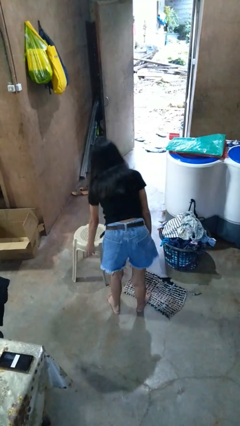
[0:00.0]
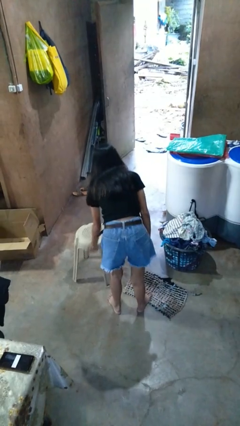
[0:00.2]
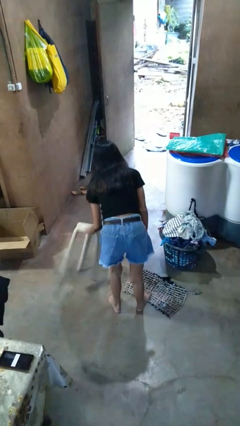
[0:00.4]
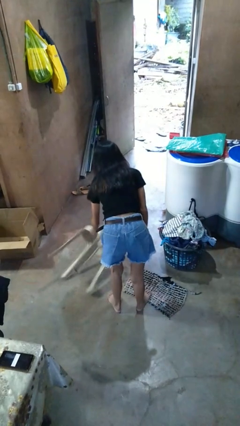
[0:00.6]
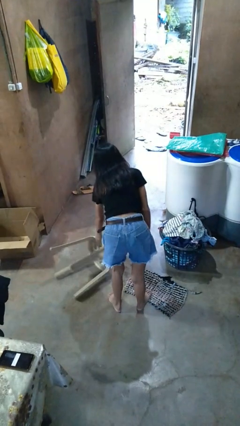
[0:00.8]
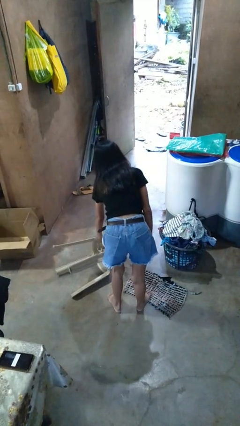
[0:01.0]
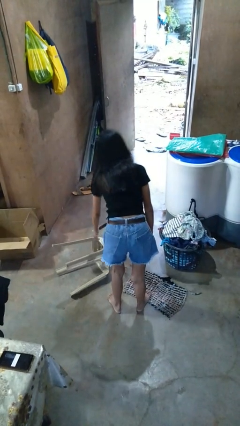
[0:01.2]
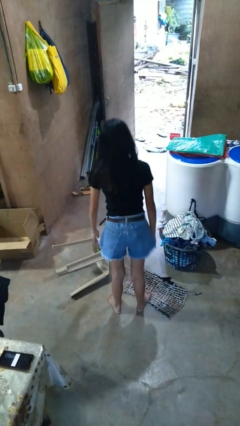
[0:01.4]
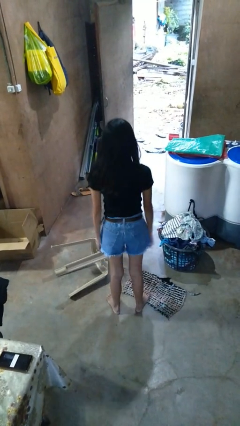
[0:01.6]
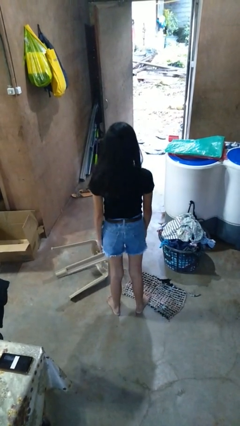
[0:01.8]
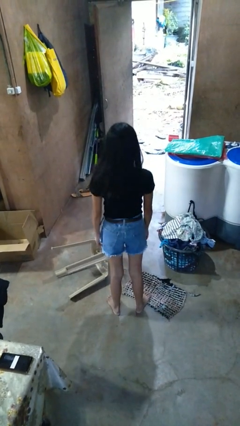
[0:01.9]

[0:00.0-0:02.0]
person knocks over furniture

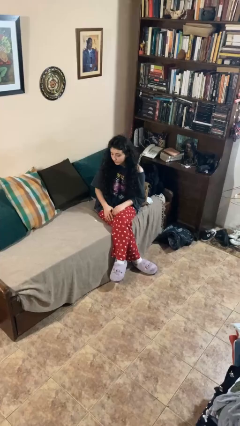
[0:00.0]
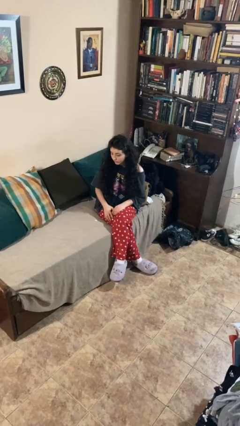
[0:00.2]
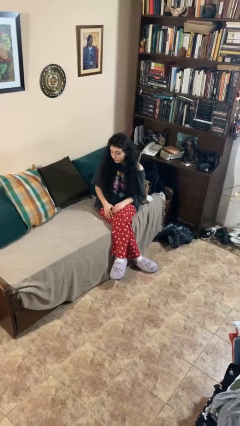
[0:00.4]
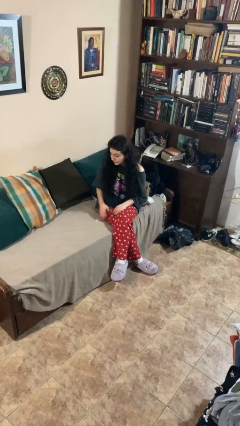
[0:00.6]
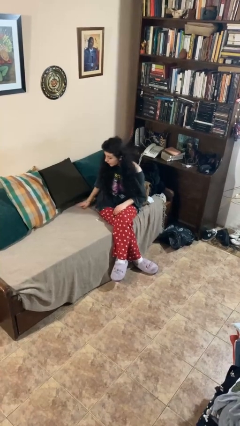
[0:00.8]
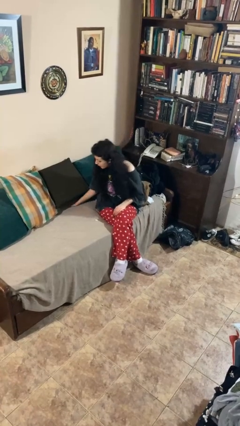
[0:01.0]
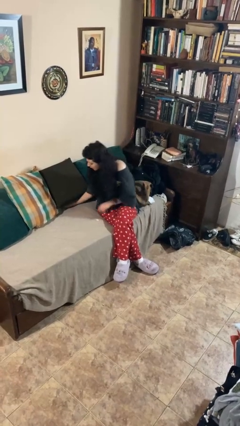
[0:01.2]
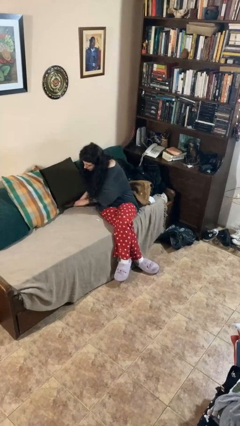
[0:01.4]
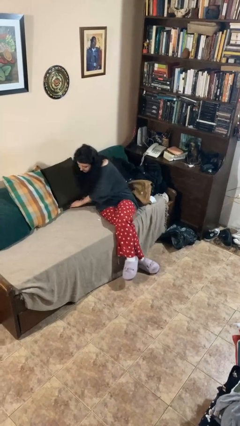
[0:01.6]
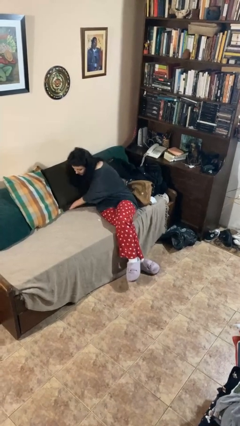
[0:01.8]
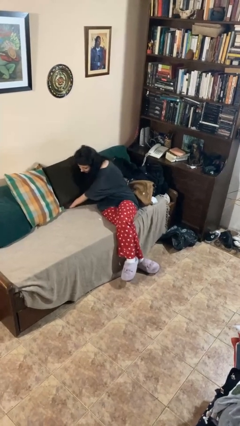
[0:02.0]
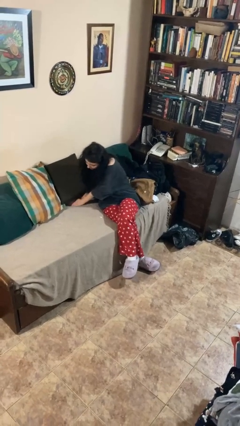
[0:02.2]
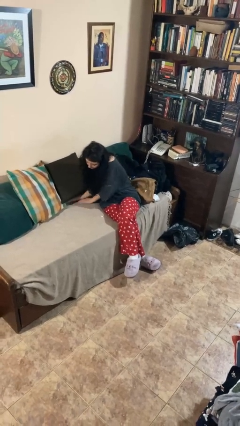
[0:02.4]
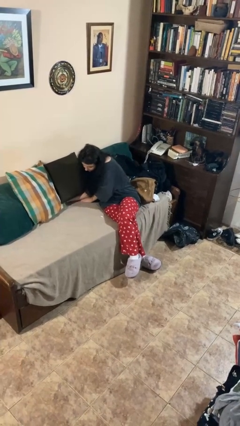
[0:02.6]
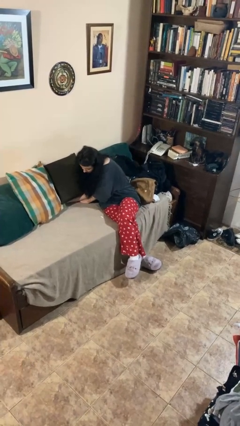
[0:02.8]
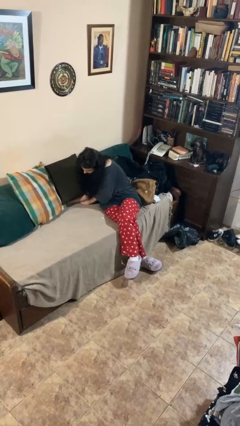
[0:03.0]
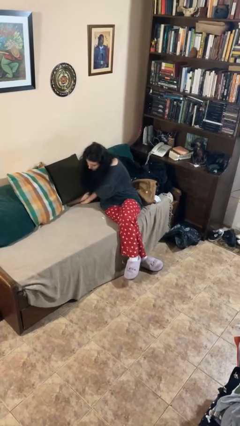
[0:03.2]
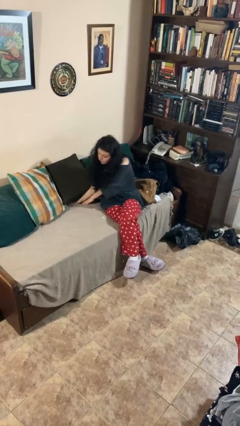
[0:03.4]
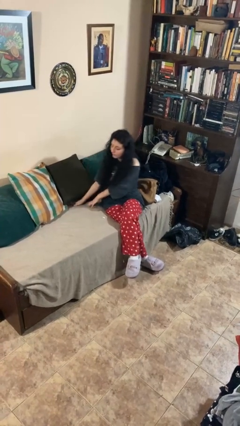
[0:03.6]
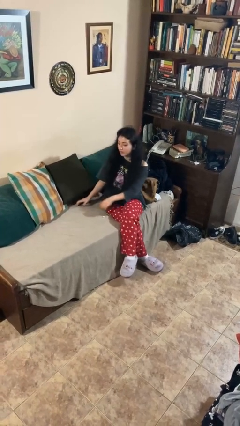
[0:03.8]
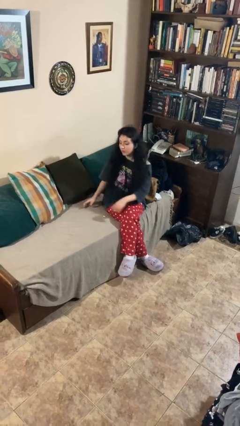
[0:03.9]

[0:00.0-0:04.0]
person searches in couch

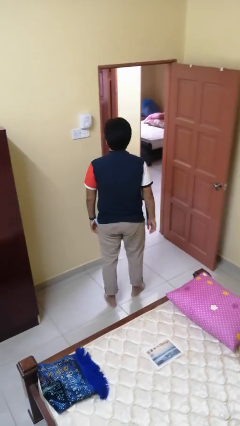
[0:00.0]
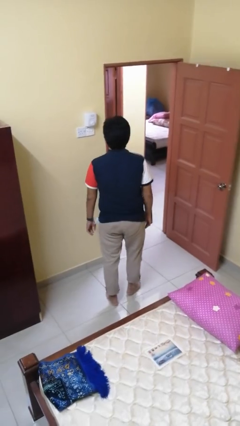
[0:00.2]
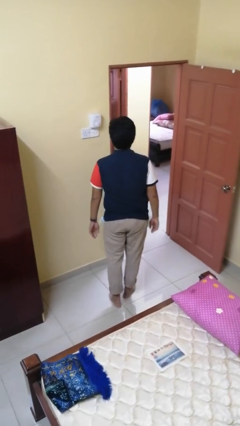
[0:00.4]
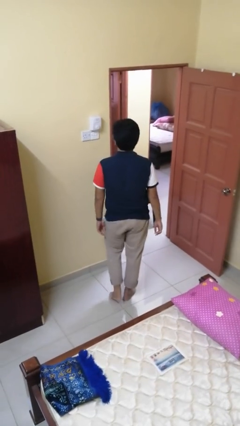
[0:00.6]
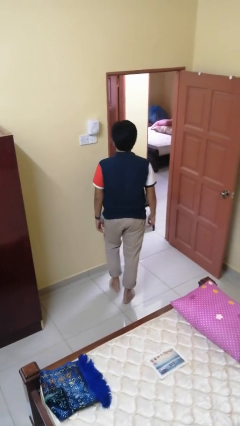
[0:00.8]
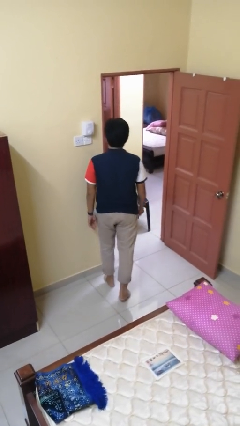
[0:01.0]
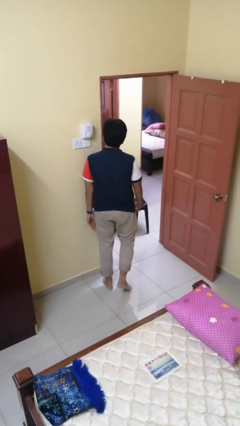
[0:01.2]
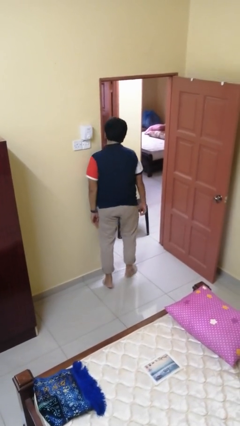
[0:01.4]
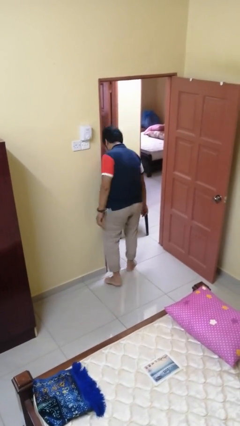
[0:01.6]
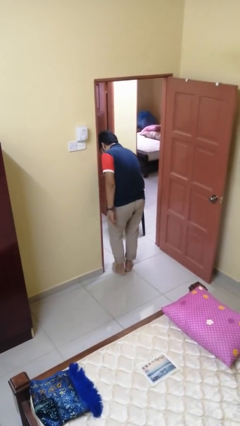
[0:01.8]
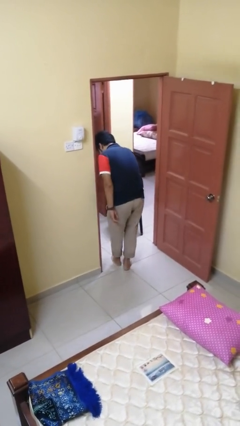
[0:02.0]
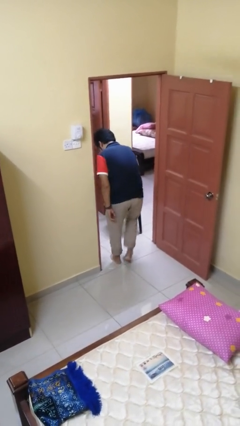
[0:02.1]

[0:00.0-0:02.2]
person bumps into wall

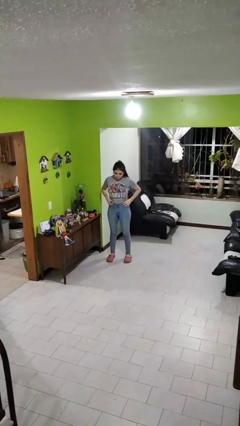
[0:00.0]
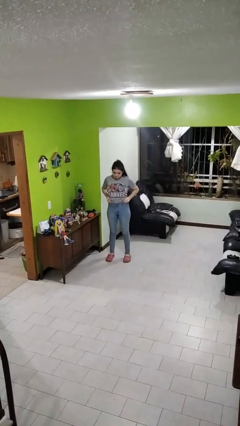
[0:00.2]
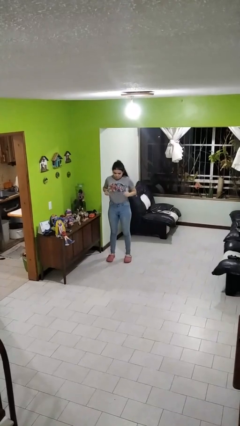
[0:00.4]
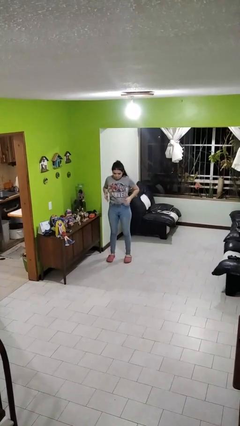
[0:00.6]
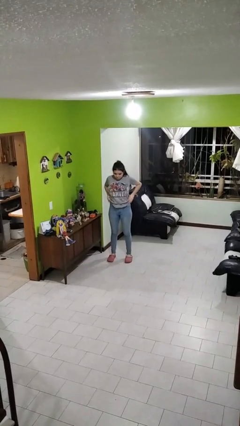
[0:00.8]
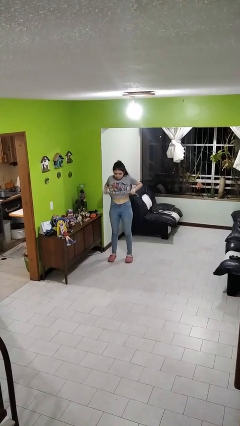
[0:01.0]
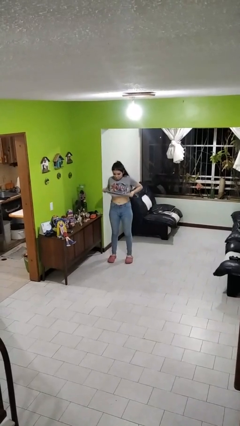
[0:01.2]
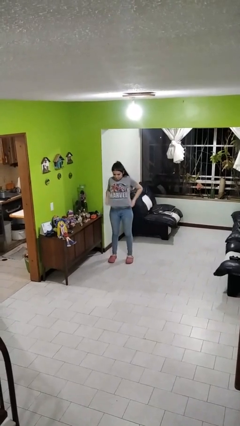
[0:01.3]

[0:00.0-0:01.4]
person untucks shirt

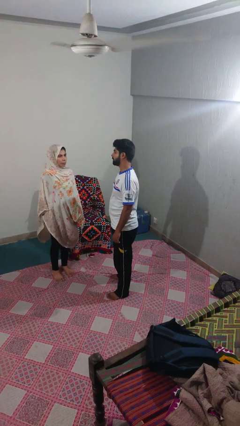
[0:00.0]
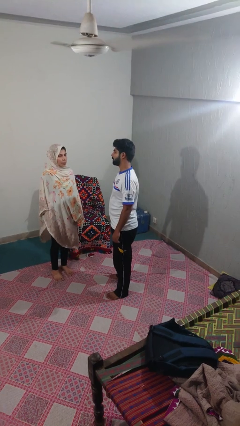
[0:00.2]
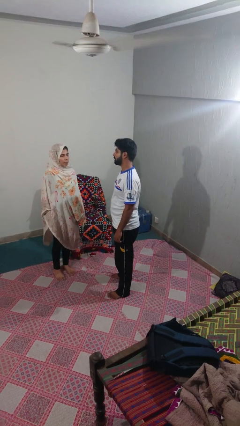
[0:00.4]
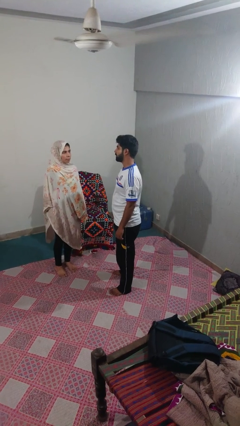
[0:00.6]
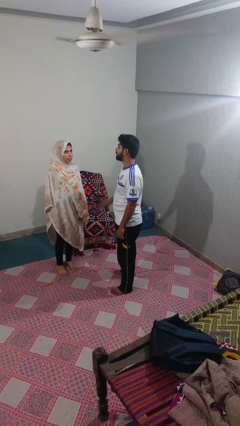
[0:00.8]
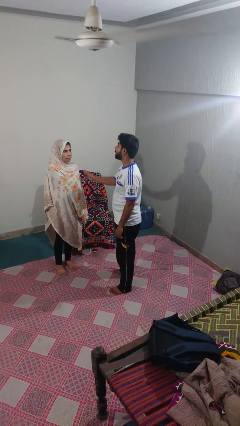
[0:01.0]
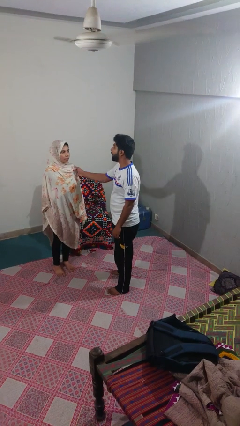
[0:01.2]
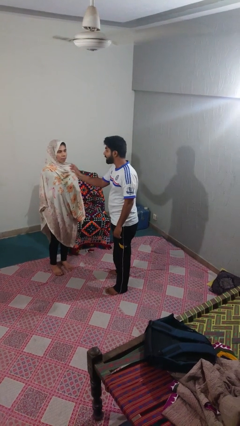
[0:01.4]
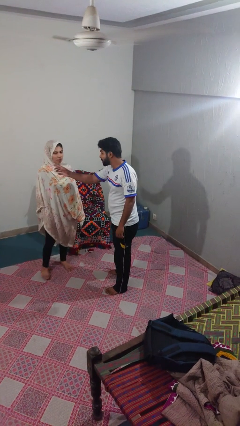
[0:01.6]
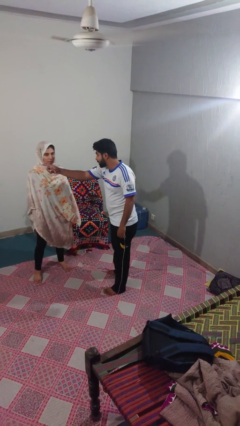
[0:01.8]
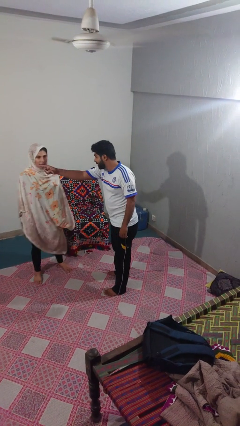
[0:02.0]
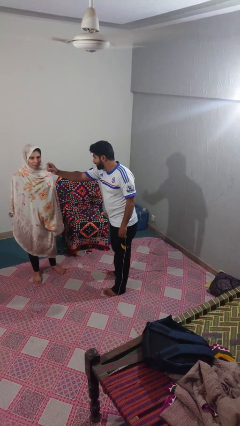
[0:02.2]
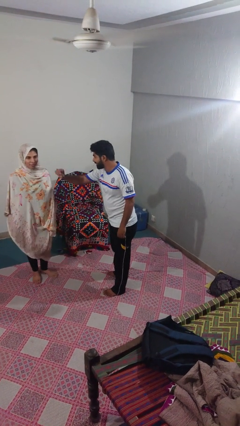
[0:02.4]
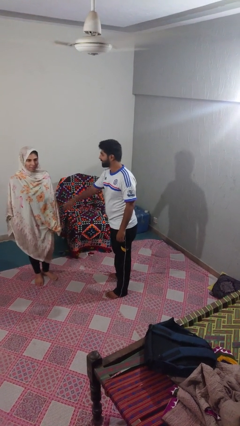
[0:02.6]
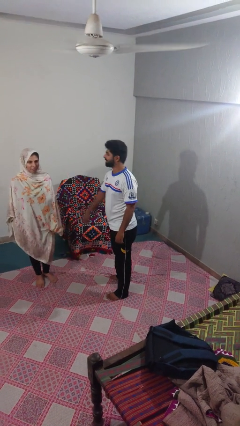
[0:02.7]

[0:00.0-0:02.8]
person shoves person

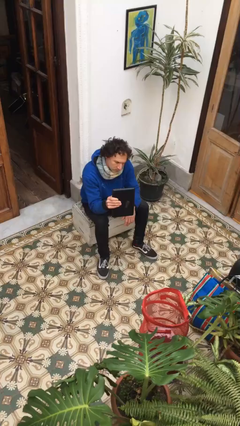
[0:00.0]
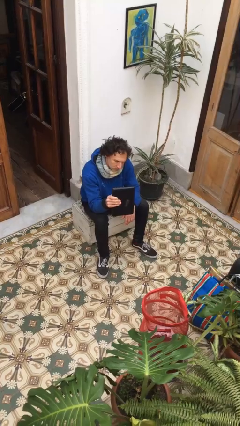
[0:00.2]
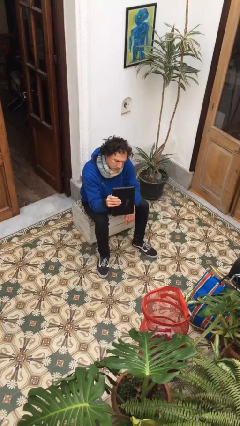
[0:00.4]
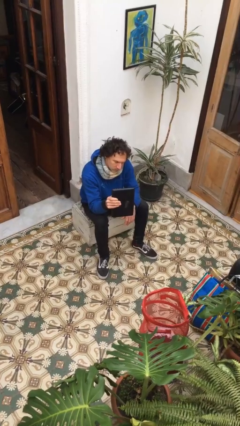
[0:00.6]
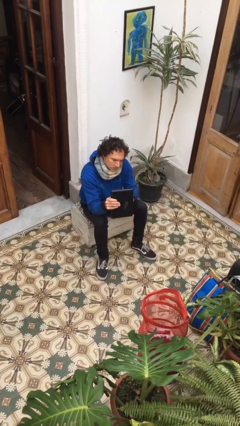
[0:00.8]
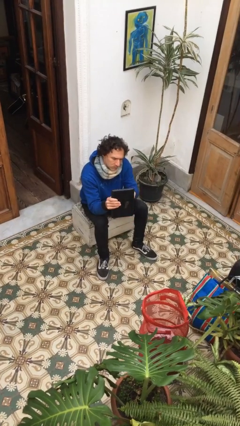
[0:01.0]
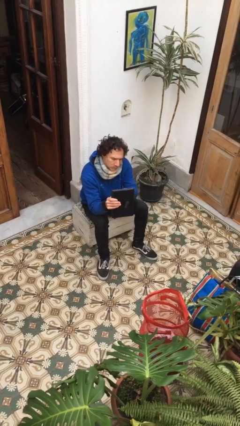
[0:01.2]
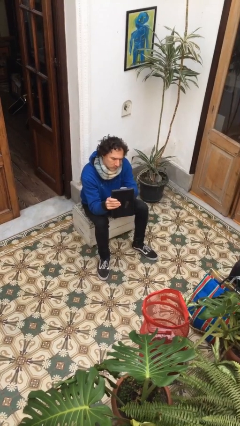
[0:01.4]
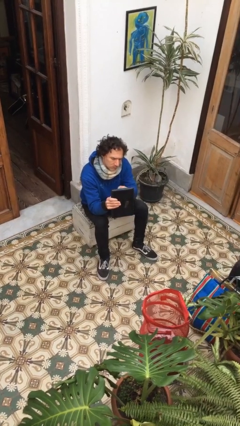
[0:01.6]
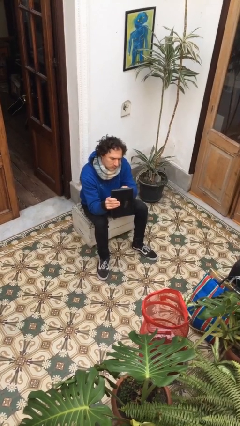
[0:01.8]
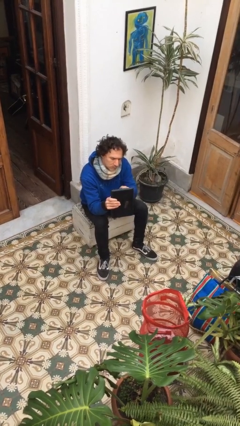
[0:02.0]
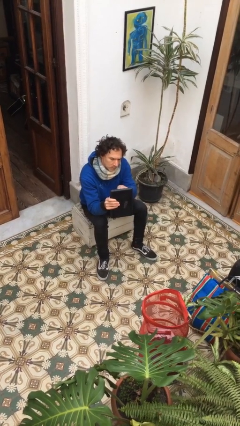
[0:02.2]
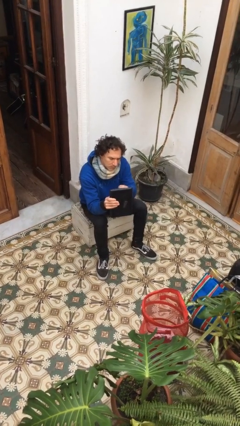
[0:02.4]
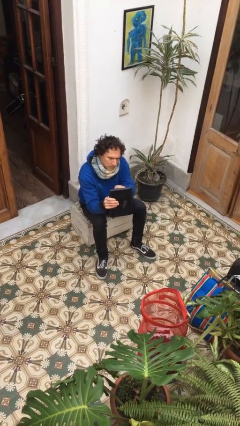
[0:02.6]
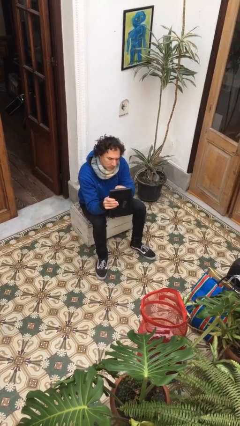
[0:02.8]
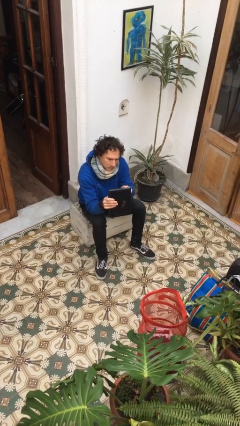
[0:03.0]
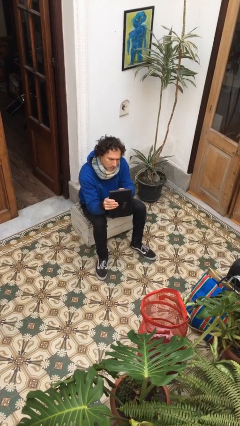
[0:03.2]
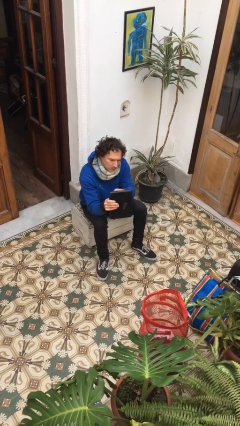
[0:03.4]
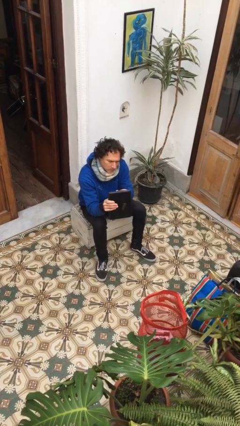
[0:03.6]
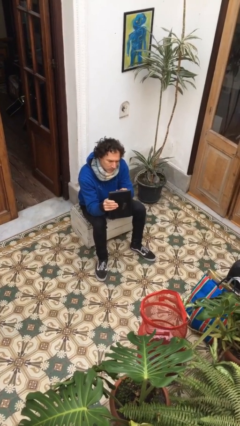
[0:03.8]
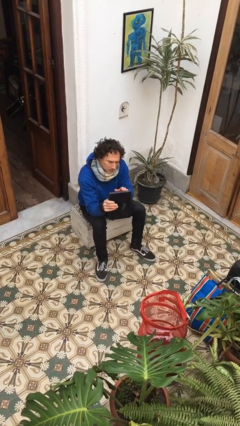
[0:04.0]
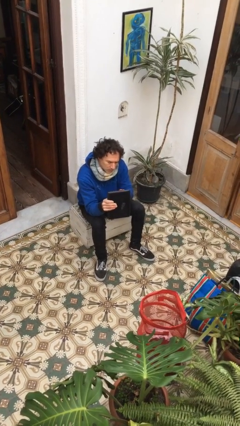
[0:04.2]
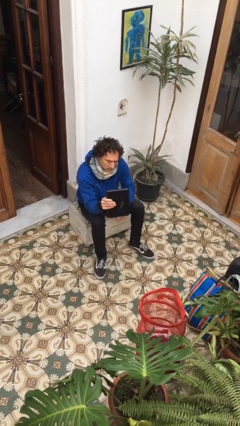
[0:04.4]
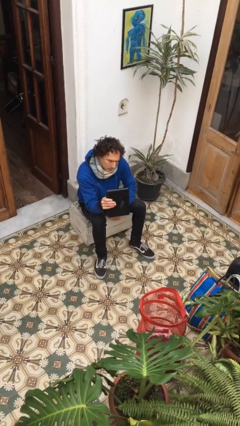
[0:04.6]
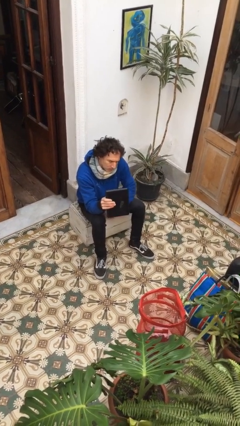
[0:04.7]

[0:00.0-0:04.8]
person interacts with tablet

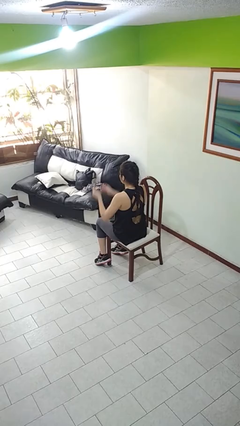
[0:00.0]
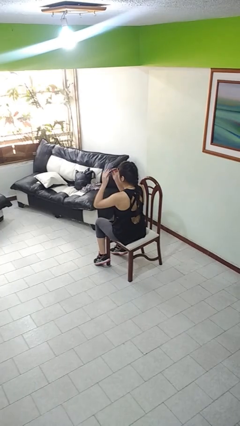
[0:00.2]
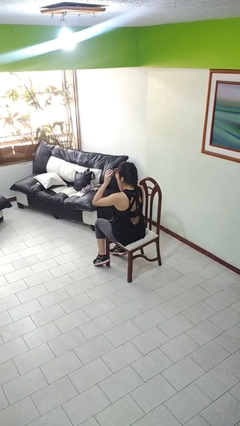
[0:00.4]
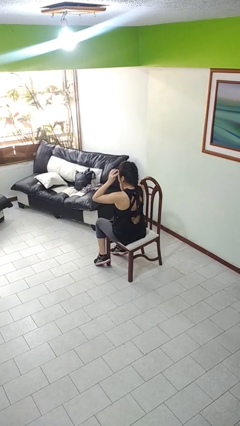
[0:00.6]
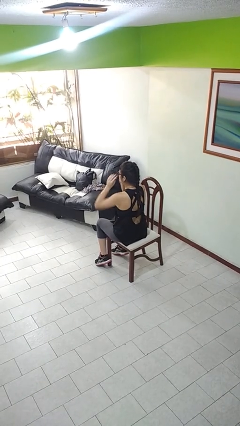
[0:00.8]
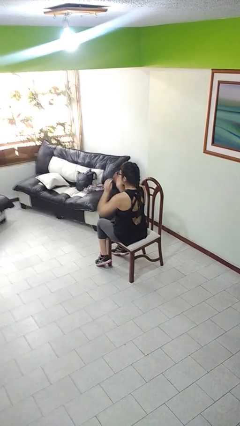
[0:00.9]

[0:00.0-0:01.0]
person puts on glasses
